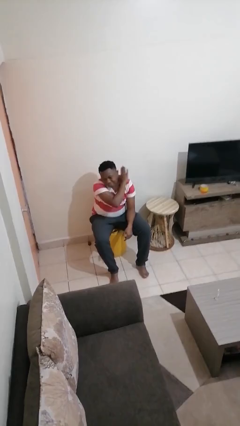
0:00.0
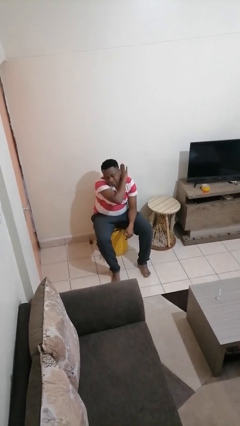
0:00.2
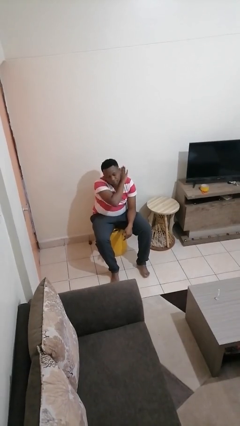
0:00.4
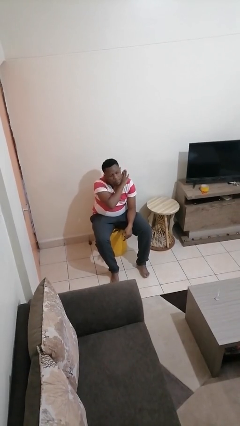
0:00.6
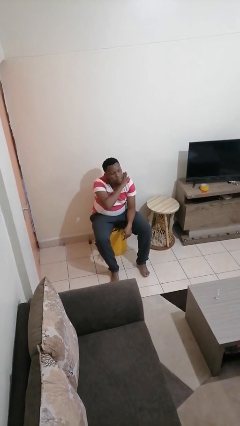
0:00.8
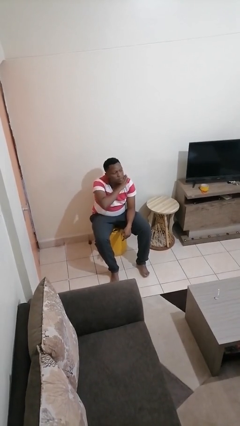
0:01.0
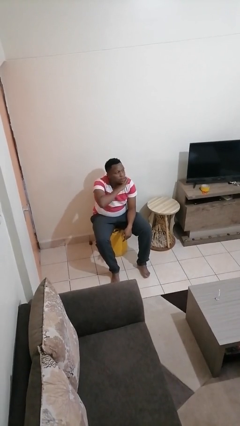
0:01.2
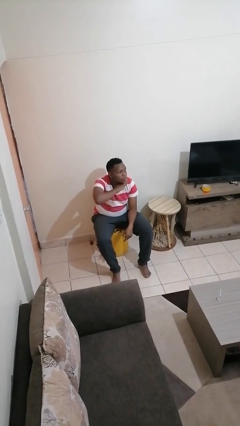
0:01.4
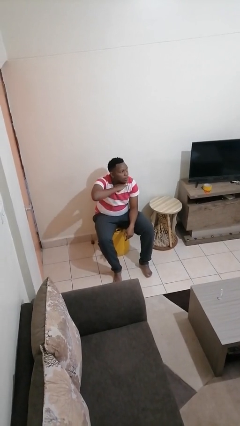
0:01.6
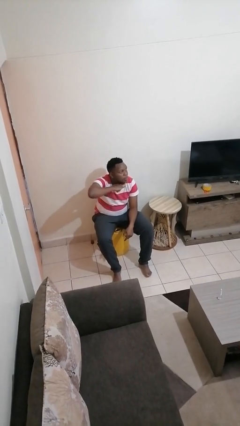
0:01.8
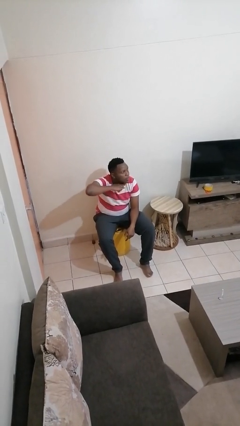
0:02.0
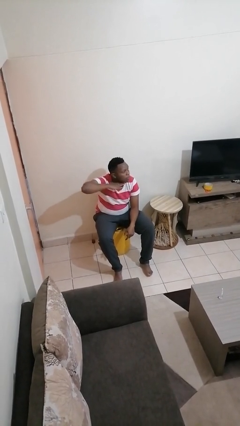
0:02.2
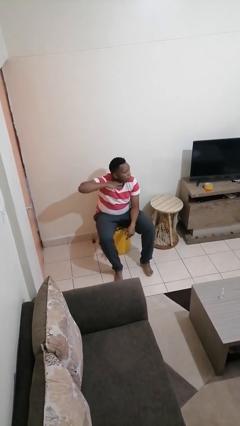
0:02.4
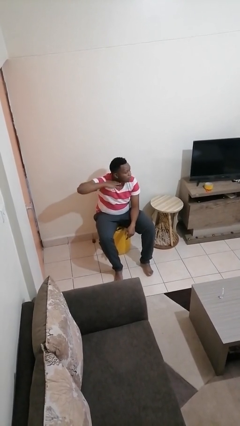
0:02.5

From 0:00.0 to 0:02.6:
person gestures cut

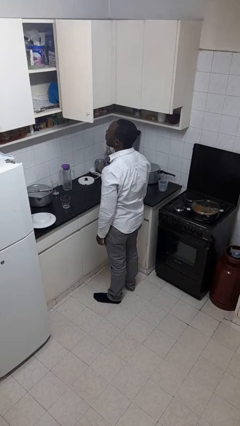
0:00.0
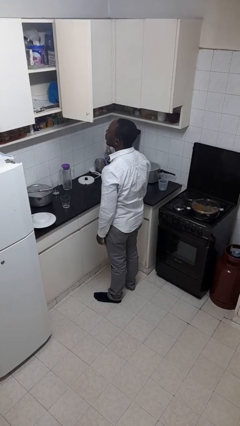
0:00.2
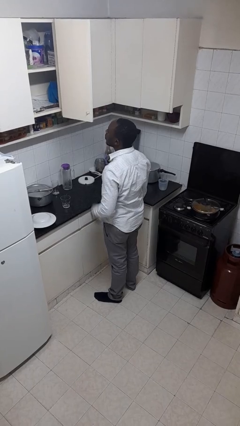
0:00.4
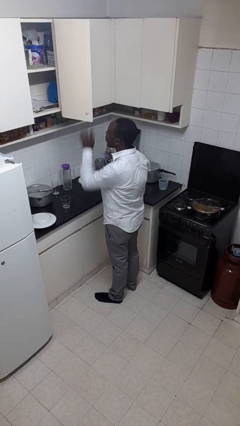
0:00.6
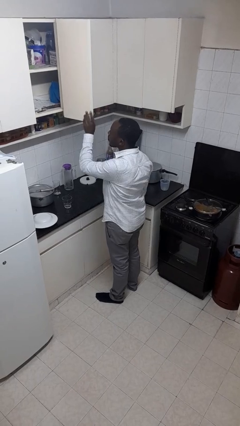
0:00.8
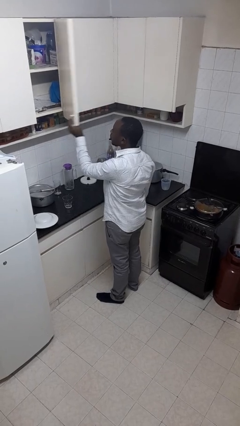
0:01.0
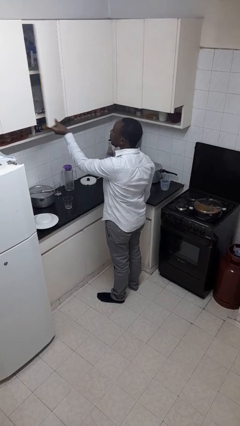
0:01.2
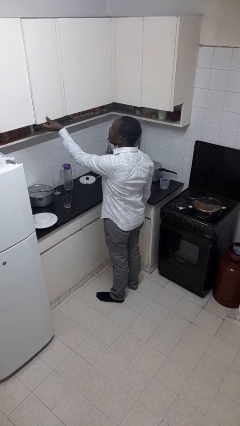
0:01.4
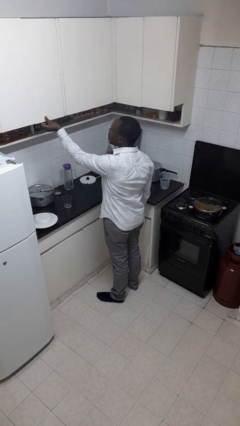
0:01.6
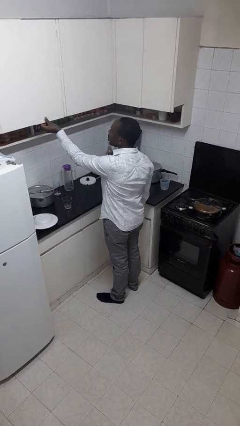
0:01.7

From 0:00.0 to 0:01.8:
person closes cabinet

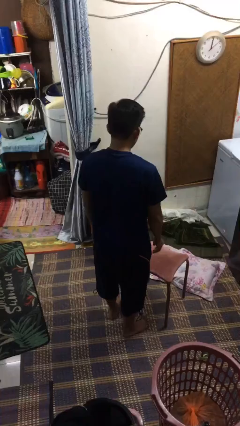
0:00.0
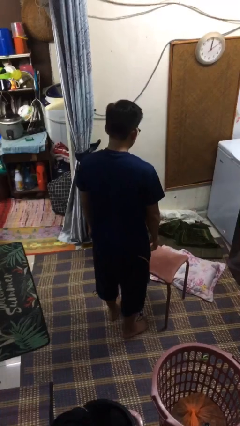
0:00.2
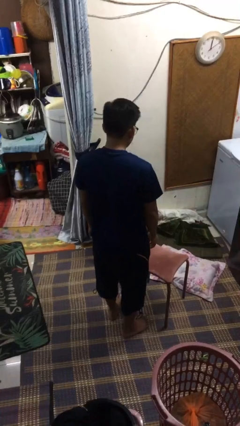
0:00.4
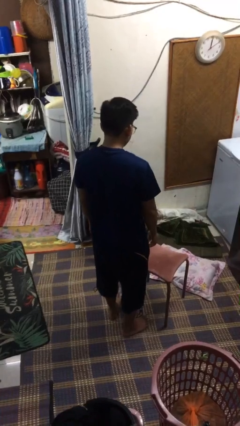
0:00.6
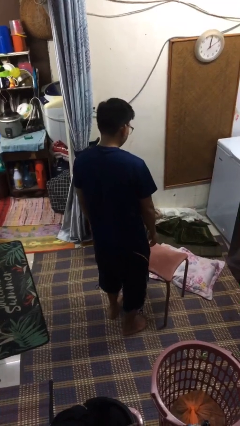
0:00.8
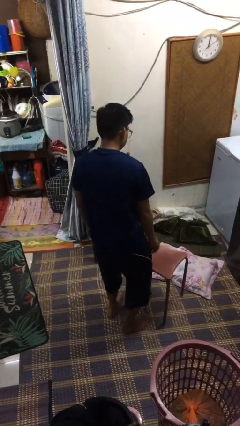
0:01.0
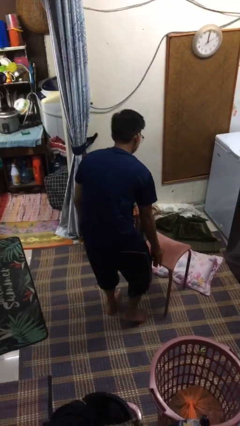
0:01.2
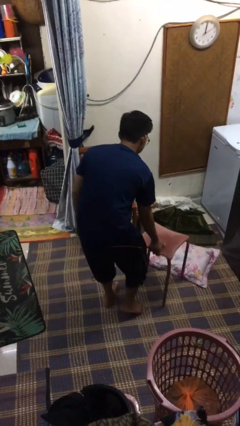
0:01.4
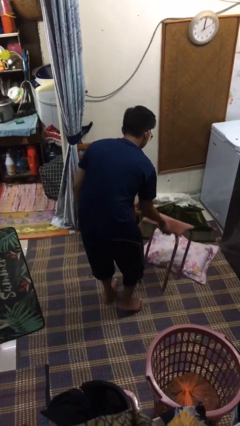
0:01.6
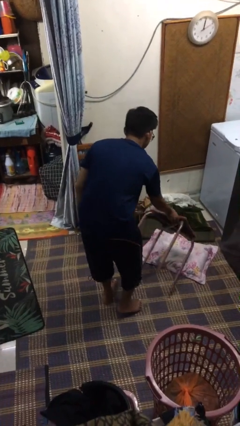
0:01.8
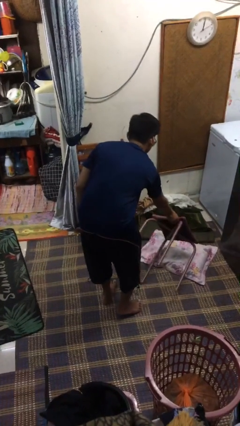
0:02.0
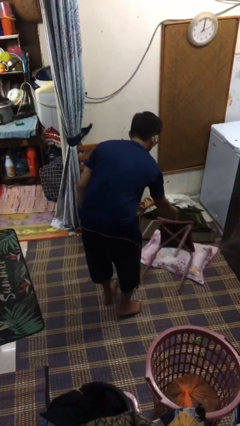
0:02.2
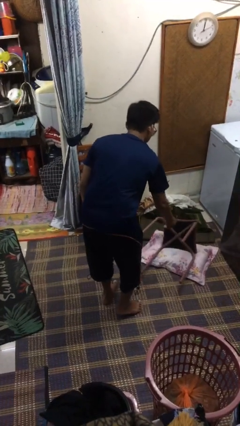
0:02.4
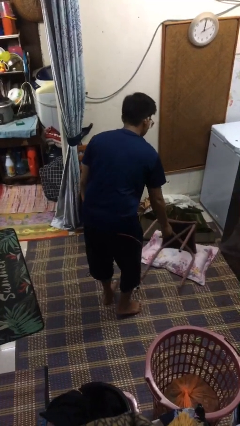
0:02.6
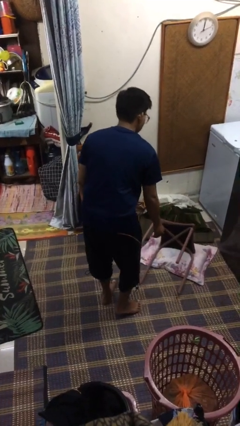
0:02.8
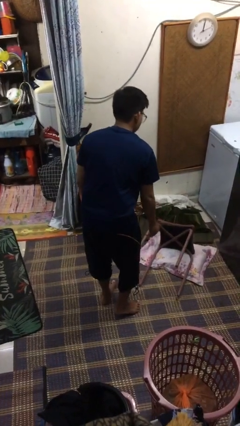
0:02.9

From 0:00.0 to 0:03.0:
person knocks over furniture

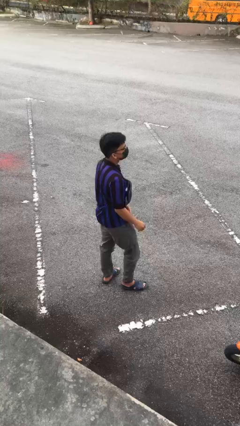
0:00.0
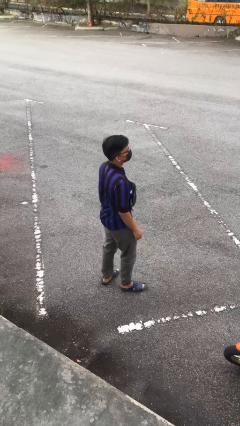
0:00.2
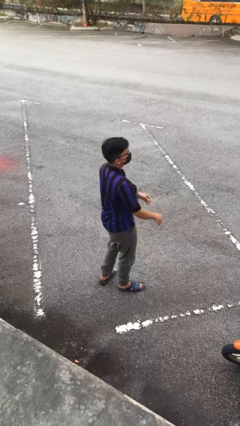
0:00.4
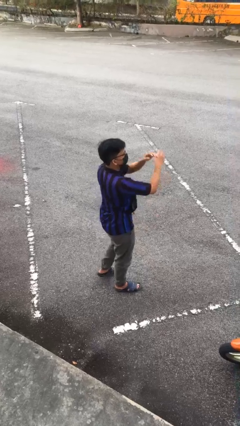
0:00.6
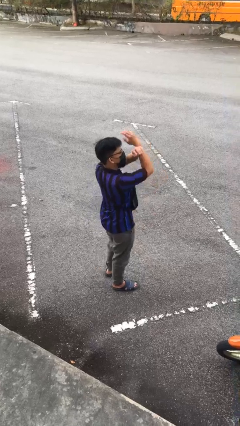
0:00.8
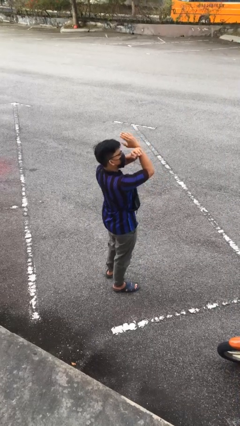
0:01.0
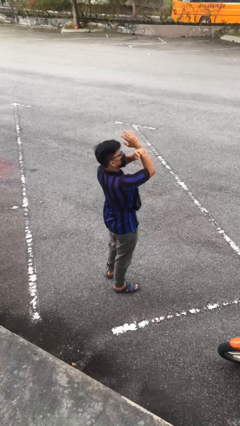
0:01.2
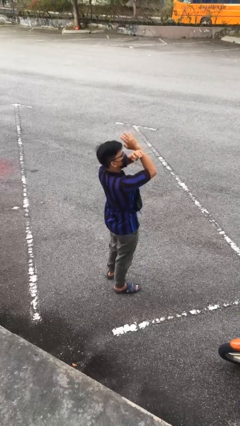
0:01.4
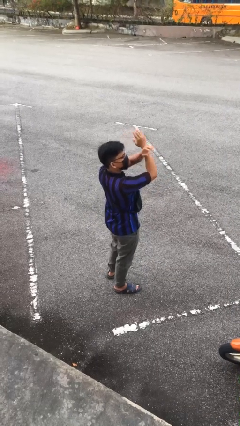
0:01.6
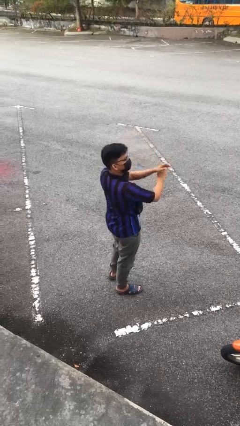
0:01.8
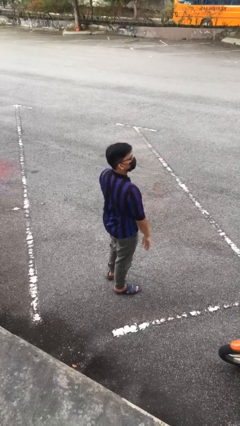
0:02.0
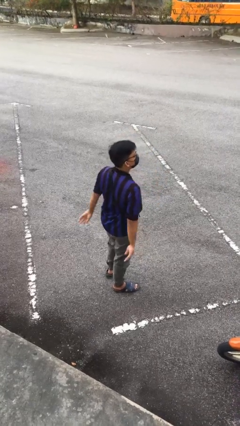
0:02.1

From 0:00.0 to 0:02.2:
person gestures arms x

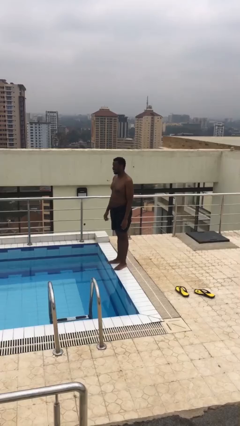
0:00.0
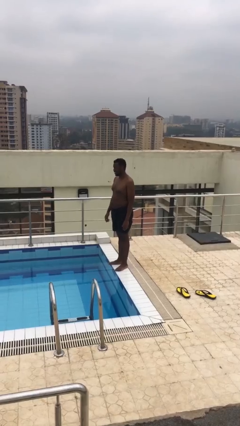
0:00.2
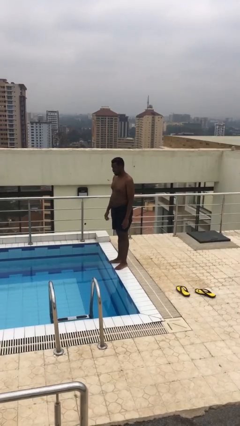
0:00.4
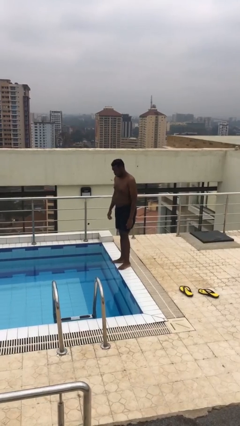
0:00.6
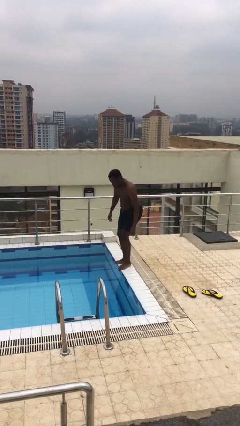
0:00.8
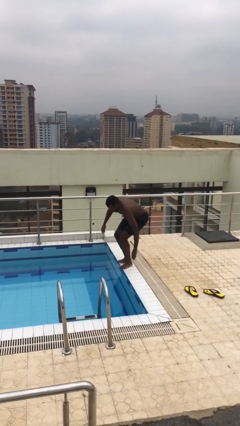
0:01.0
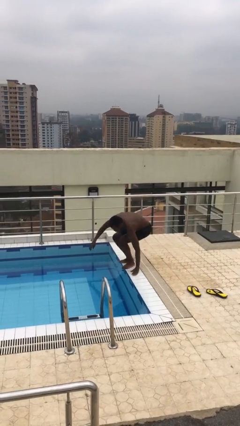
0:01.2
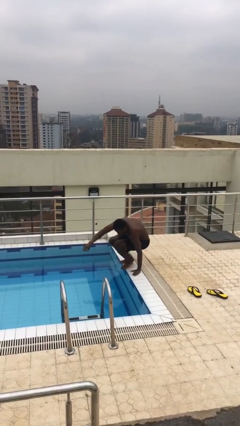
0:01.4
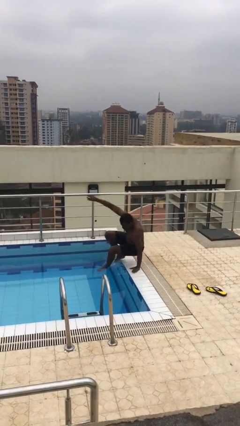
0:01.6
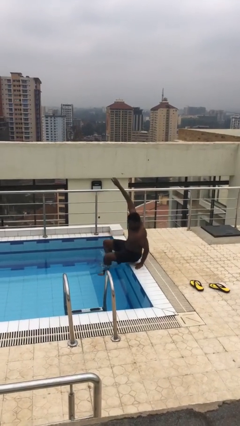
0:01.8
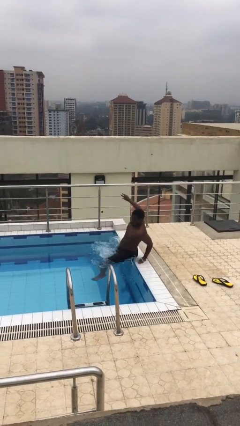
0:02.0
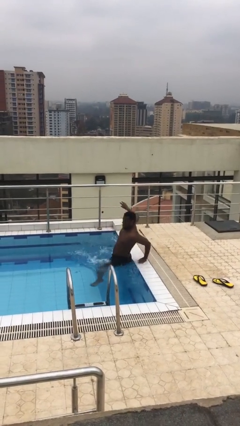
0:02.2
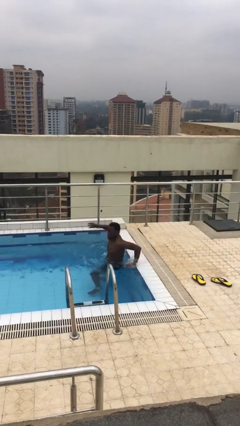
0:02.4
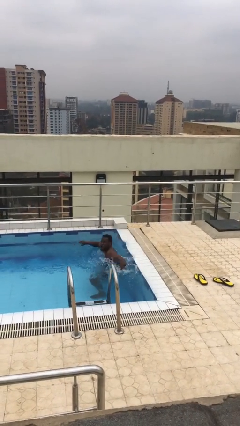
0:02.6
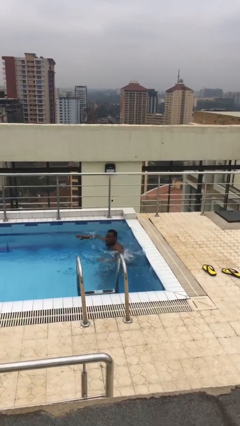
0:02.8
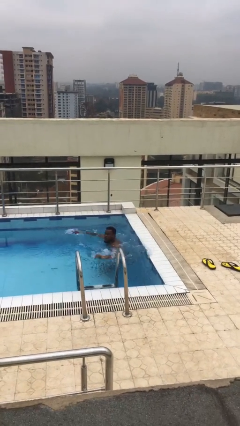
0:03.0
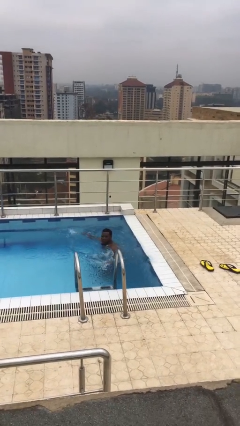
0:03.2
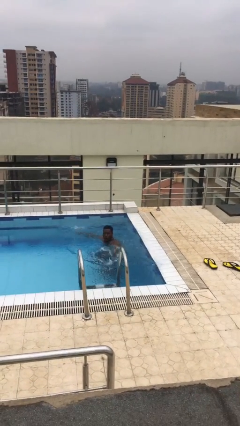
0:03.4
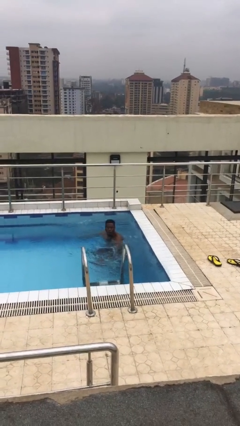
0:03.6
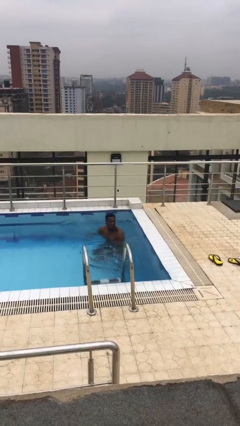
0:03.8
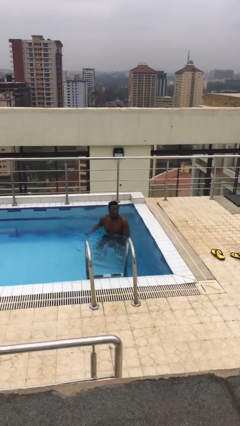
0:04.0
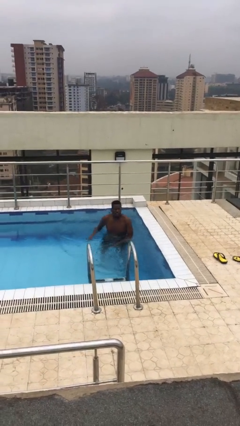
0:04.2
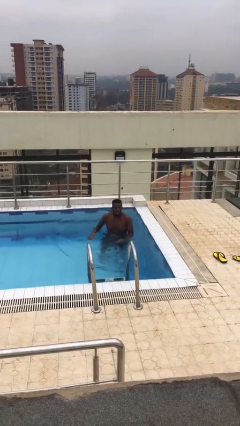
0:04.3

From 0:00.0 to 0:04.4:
person jumps into pool

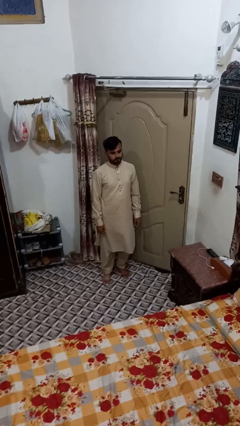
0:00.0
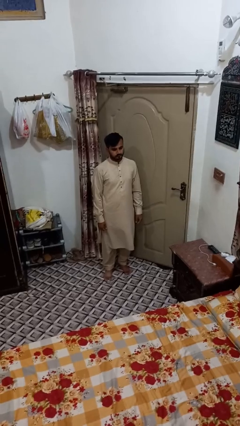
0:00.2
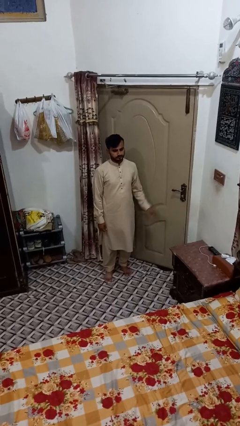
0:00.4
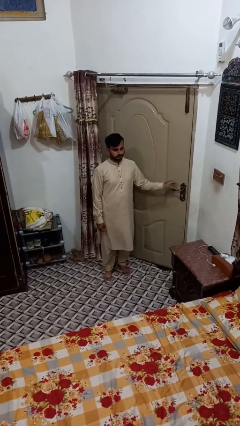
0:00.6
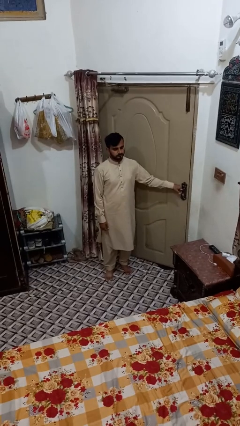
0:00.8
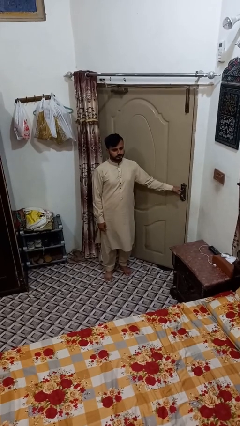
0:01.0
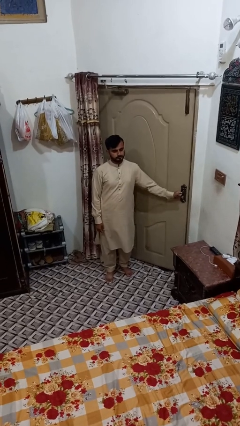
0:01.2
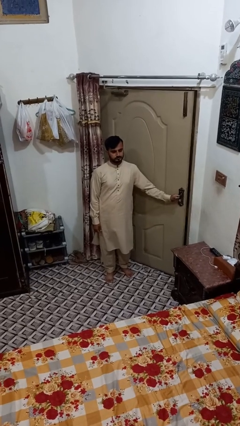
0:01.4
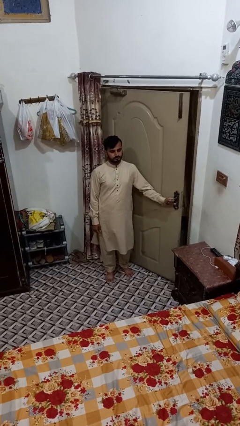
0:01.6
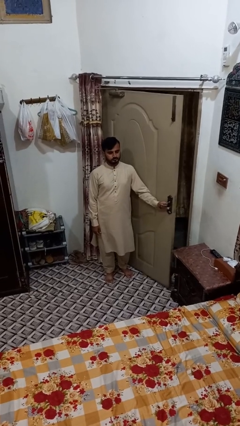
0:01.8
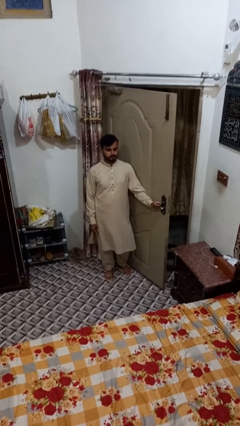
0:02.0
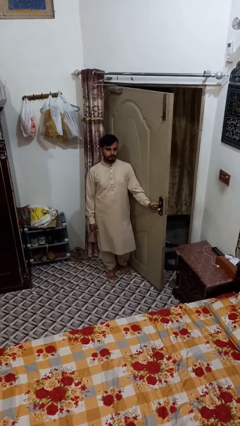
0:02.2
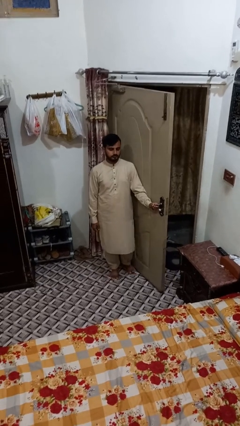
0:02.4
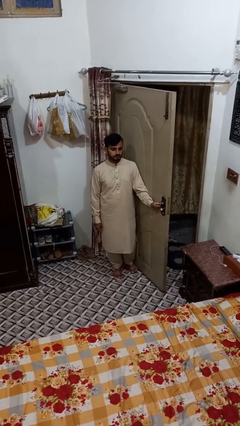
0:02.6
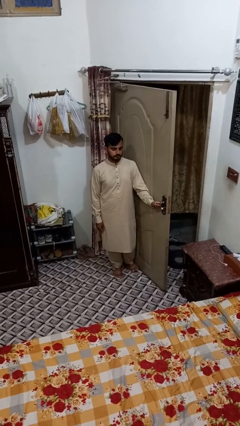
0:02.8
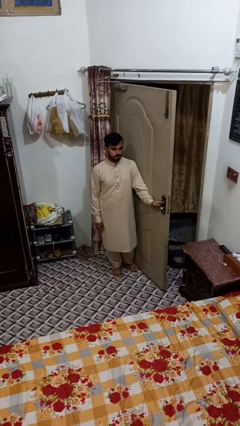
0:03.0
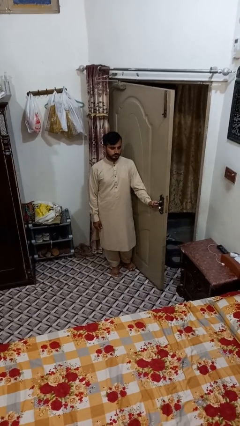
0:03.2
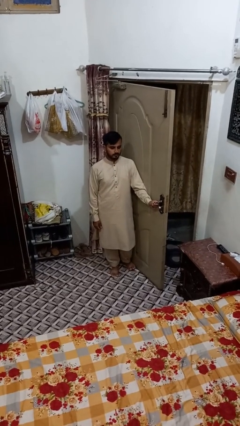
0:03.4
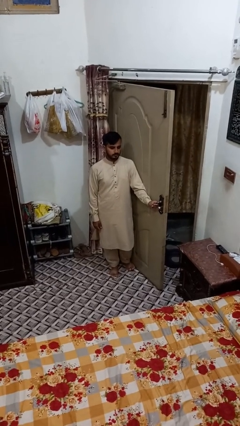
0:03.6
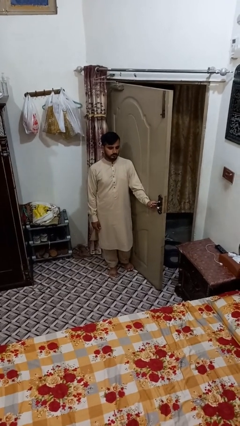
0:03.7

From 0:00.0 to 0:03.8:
person opens closet door
